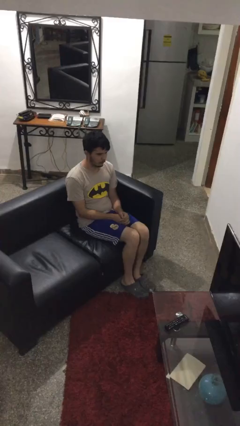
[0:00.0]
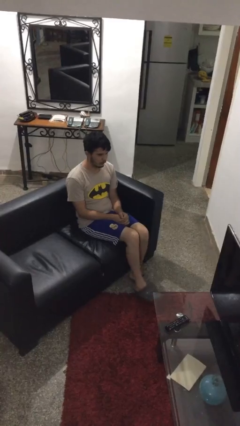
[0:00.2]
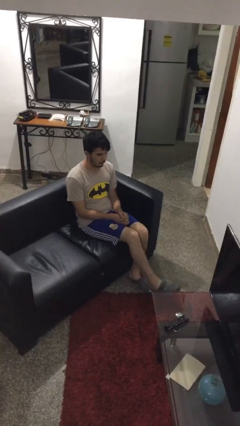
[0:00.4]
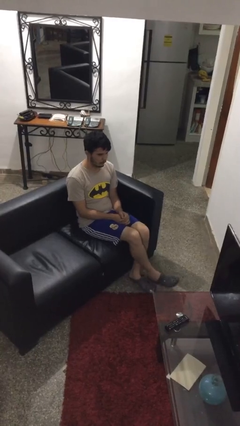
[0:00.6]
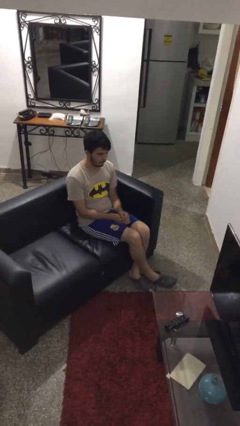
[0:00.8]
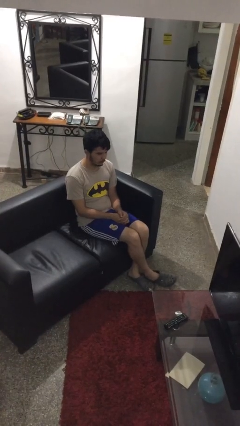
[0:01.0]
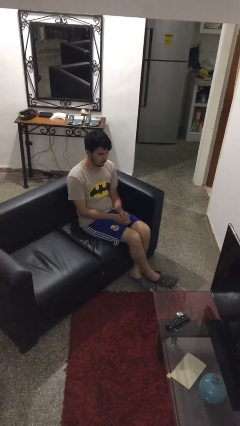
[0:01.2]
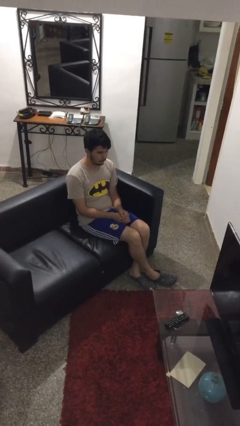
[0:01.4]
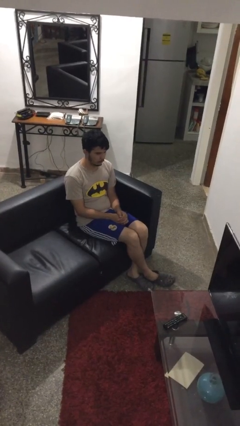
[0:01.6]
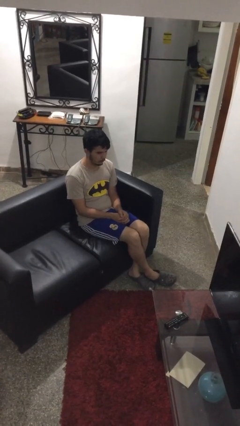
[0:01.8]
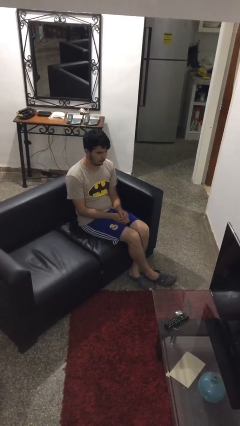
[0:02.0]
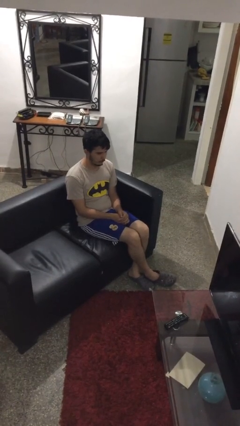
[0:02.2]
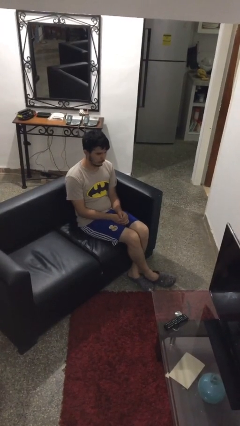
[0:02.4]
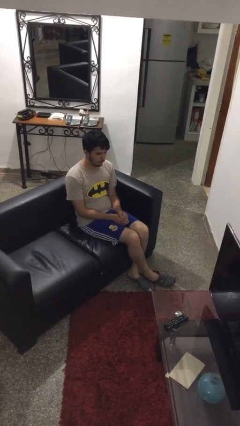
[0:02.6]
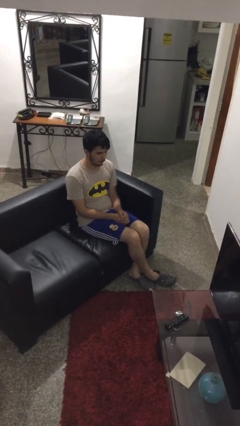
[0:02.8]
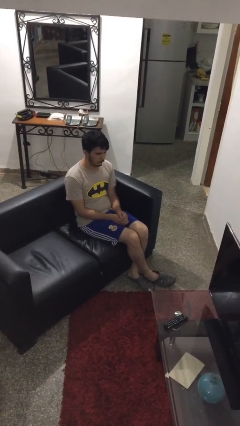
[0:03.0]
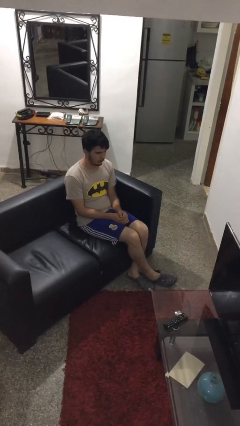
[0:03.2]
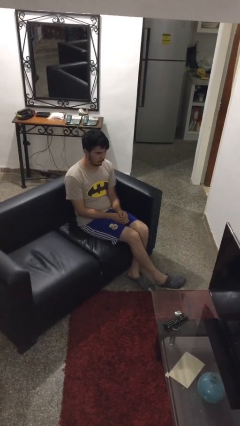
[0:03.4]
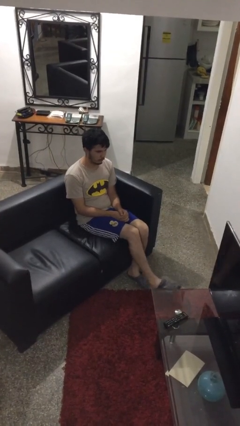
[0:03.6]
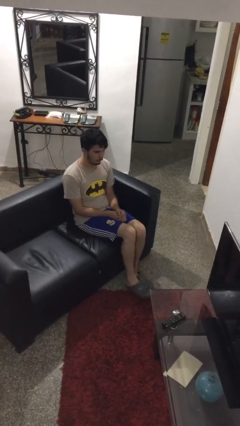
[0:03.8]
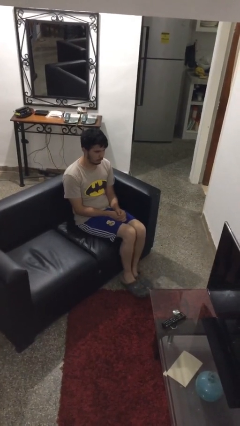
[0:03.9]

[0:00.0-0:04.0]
person crosses legs

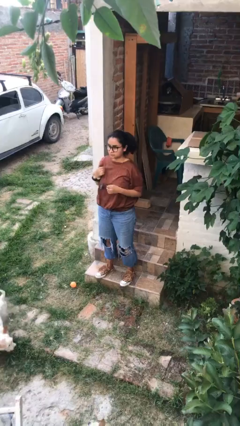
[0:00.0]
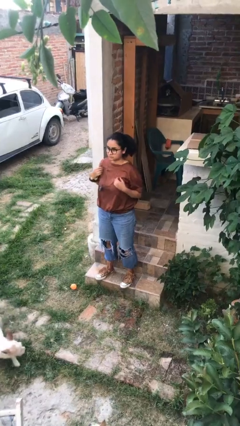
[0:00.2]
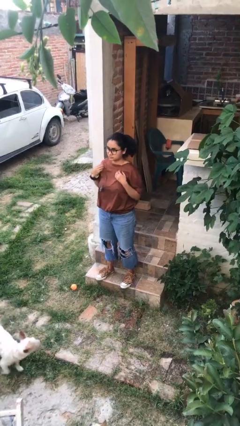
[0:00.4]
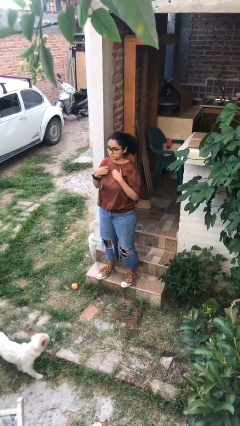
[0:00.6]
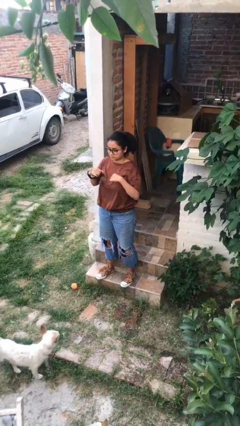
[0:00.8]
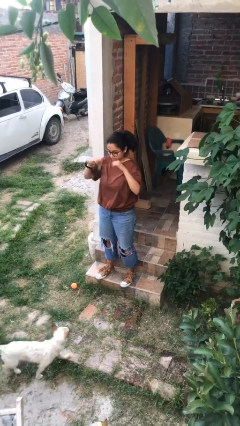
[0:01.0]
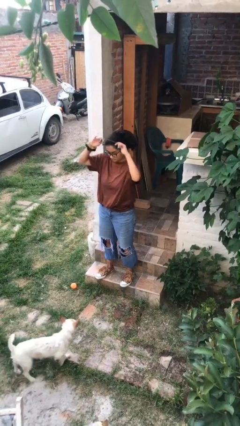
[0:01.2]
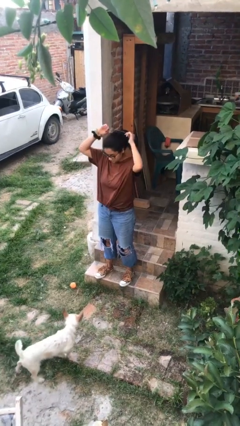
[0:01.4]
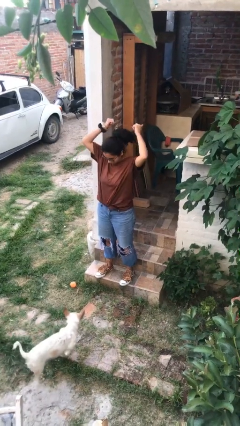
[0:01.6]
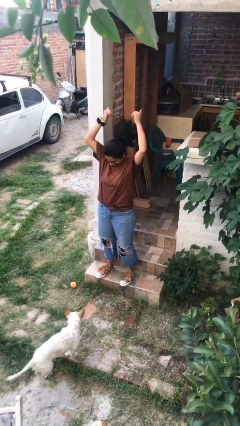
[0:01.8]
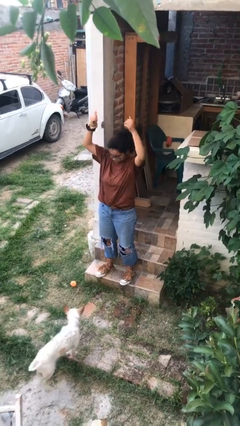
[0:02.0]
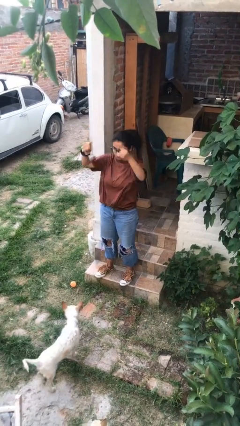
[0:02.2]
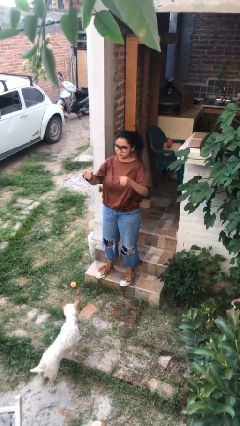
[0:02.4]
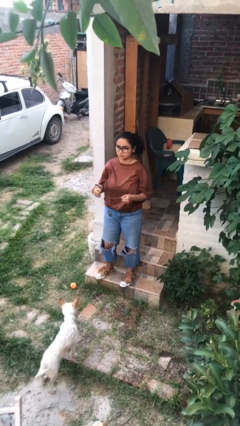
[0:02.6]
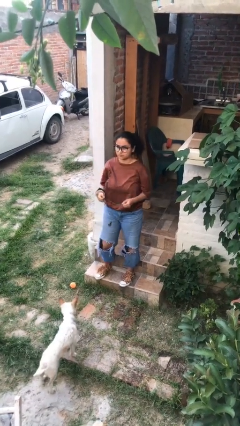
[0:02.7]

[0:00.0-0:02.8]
person takes off necklace

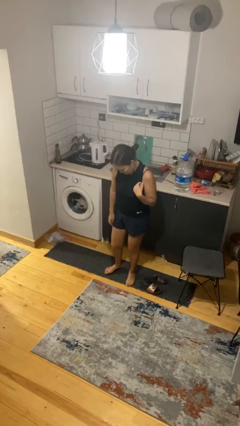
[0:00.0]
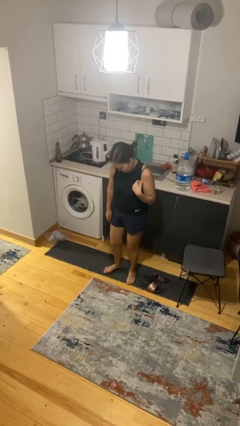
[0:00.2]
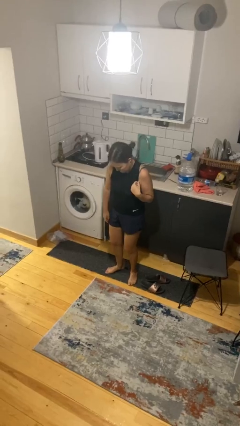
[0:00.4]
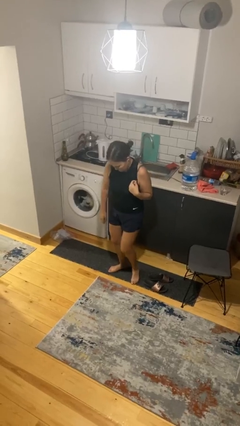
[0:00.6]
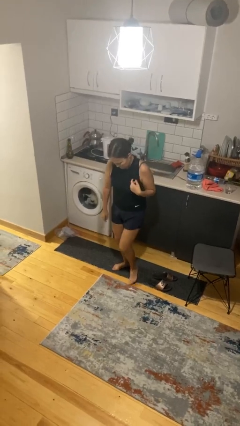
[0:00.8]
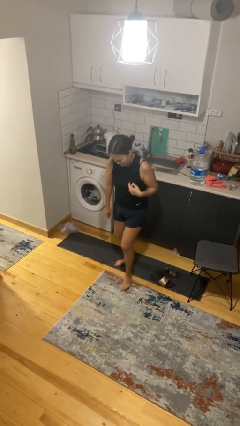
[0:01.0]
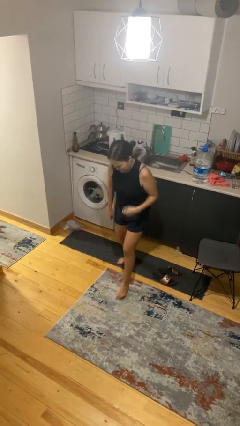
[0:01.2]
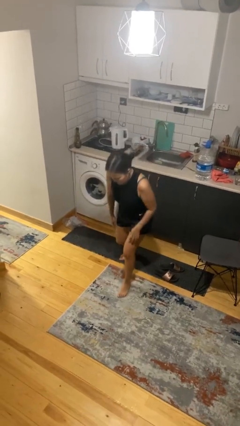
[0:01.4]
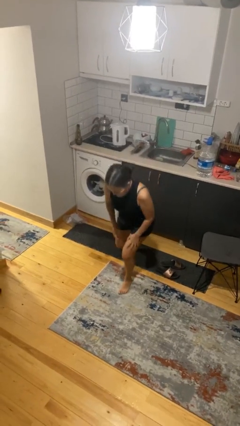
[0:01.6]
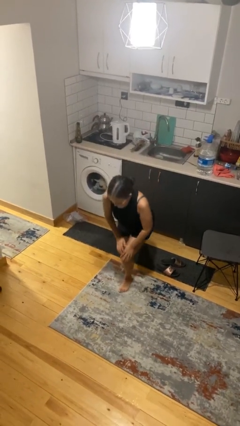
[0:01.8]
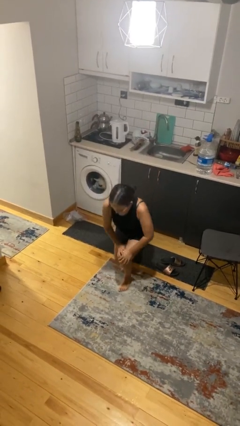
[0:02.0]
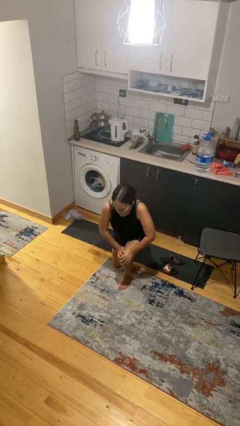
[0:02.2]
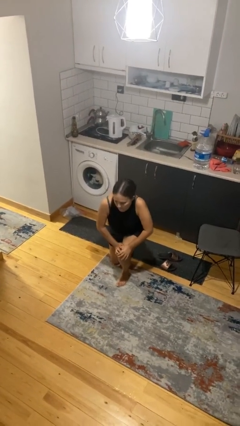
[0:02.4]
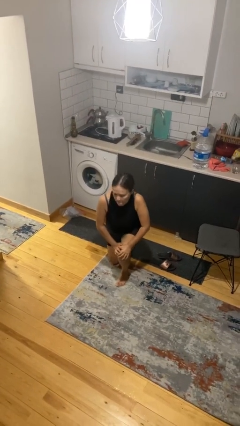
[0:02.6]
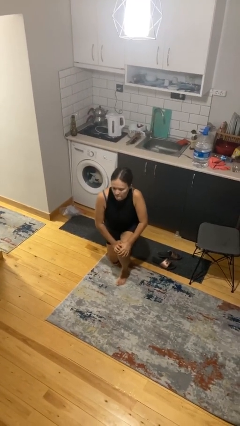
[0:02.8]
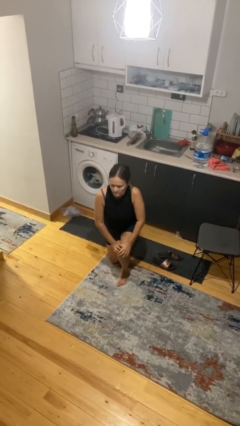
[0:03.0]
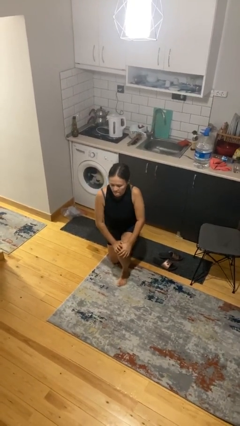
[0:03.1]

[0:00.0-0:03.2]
person kneels

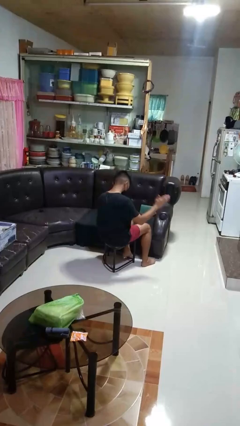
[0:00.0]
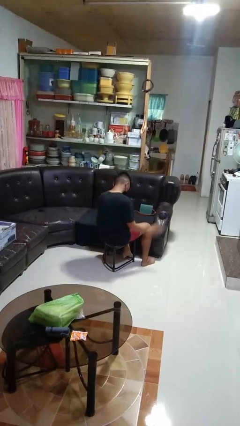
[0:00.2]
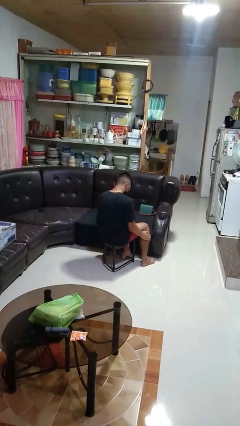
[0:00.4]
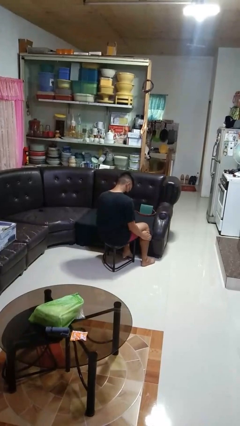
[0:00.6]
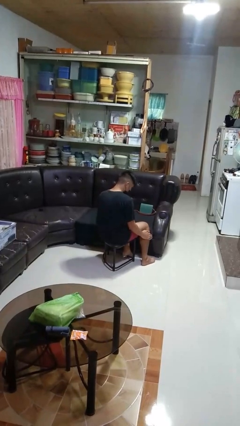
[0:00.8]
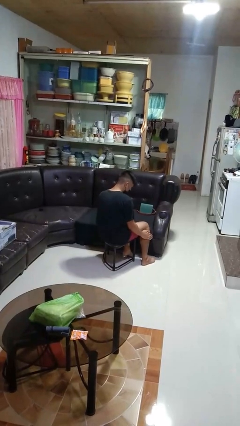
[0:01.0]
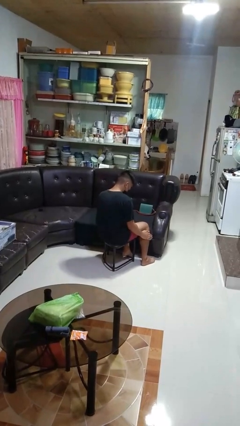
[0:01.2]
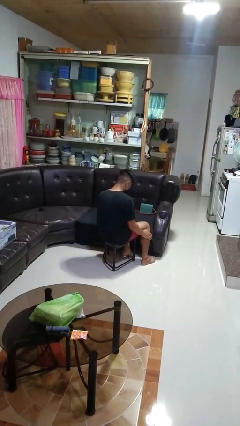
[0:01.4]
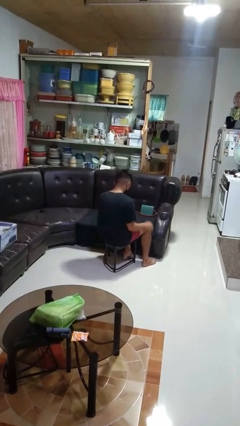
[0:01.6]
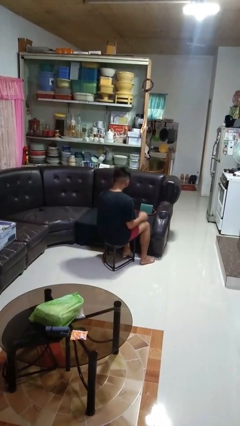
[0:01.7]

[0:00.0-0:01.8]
person swats bug

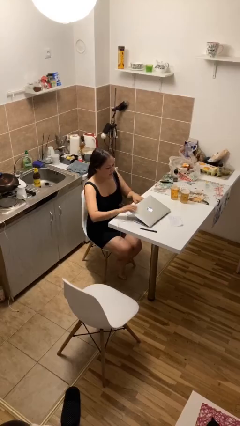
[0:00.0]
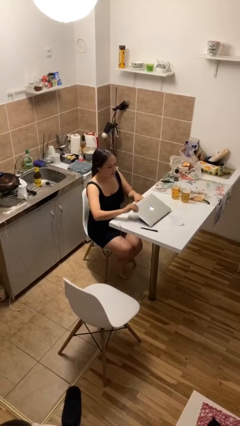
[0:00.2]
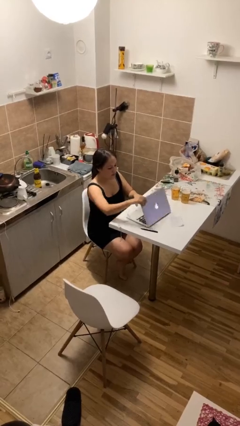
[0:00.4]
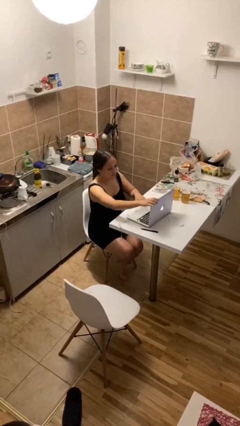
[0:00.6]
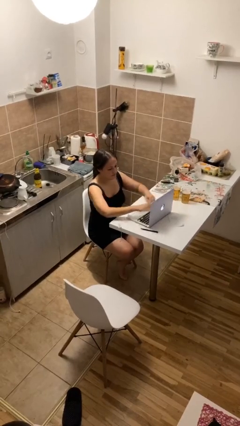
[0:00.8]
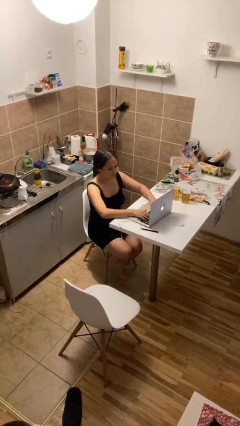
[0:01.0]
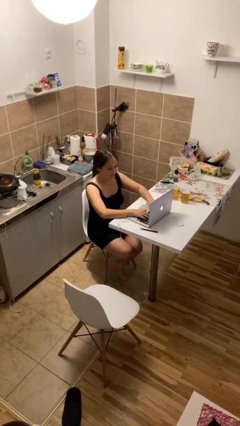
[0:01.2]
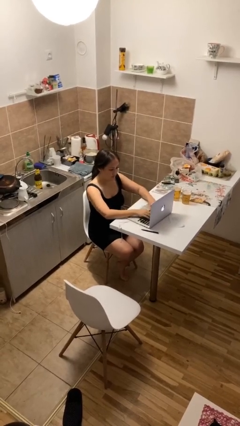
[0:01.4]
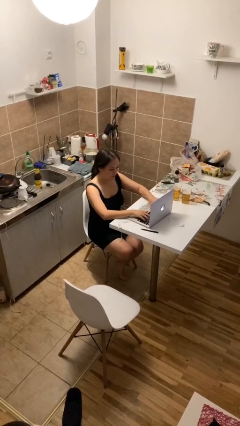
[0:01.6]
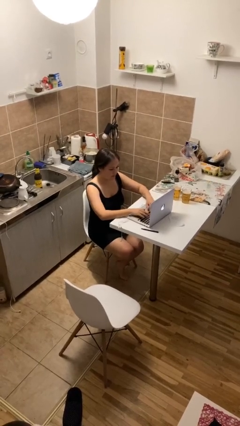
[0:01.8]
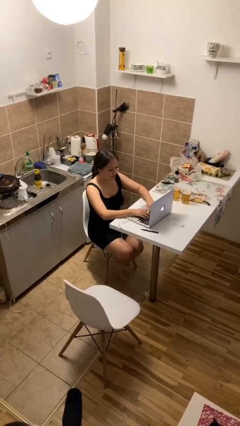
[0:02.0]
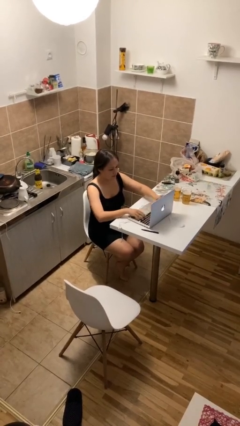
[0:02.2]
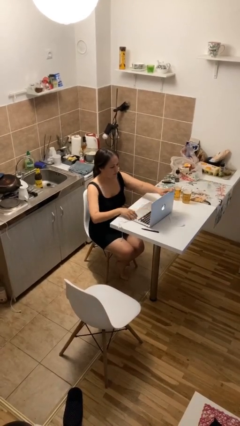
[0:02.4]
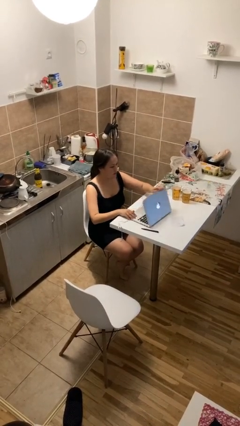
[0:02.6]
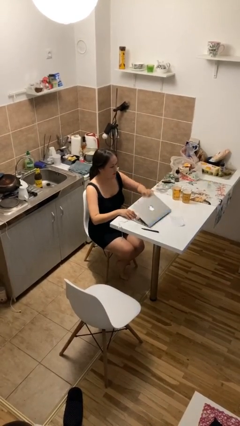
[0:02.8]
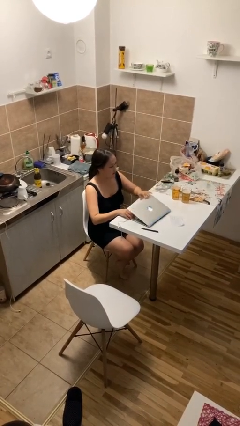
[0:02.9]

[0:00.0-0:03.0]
person interacts with laptop

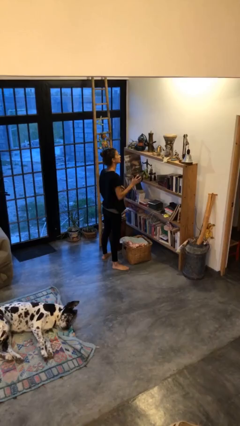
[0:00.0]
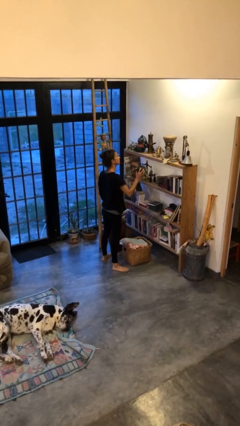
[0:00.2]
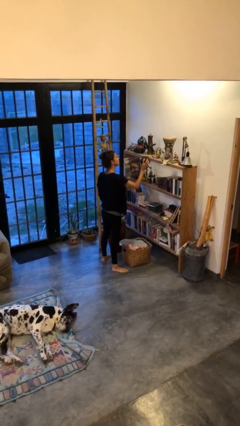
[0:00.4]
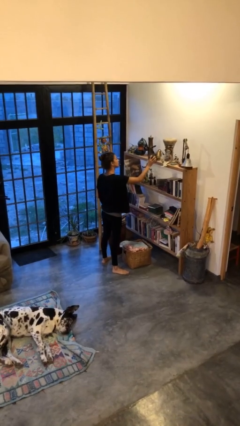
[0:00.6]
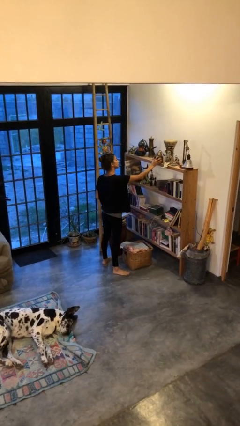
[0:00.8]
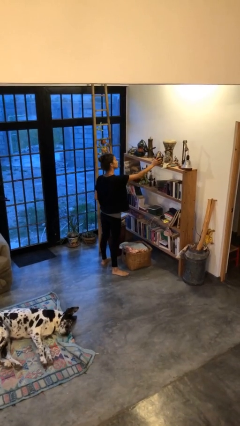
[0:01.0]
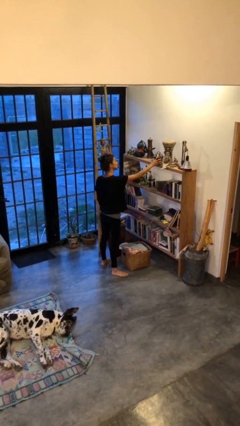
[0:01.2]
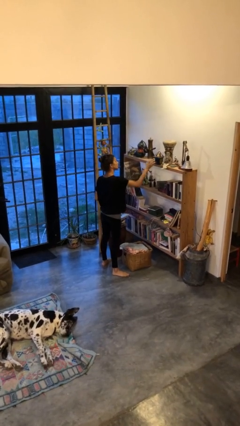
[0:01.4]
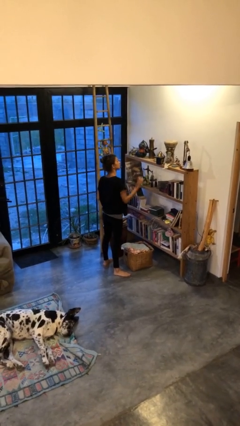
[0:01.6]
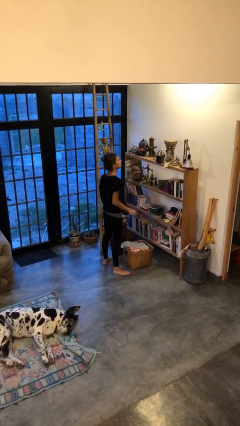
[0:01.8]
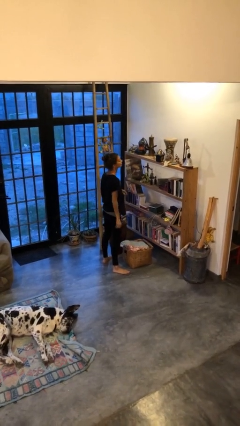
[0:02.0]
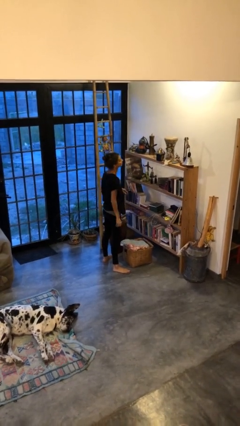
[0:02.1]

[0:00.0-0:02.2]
person puts down object on countertop

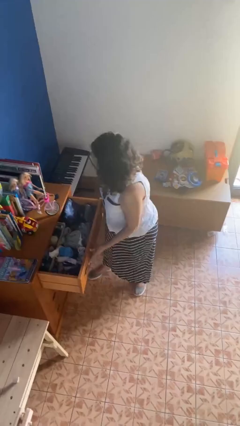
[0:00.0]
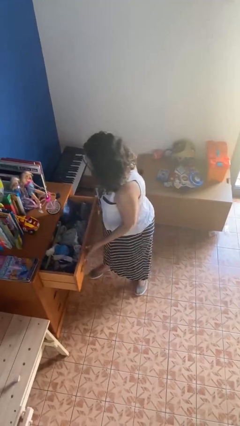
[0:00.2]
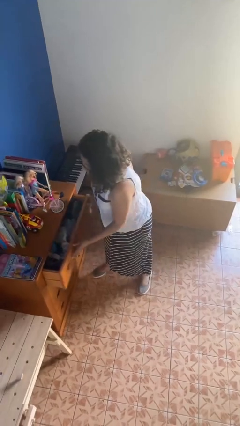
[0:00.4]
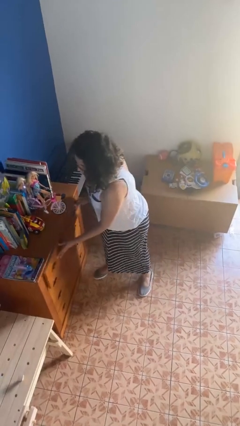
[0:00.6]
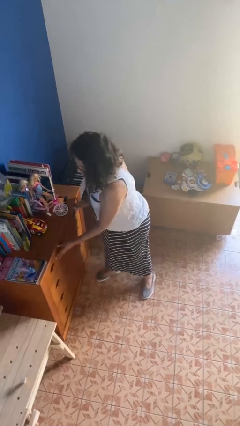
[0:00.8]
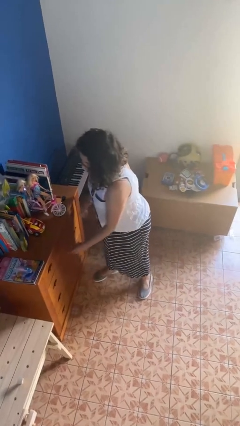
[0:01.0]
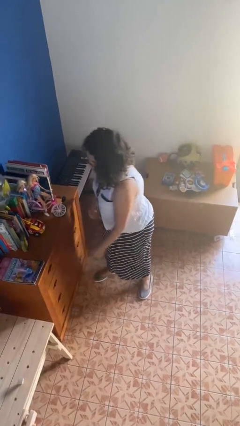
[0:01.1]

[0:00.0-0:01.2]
person closes dresser drawer
